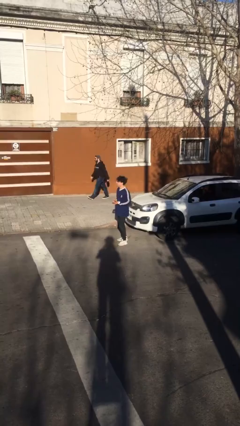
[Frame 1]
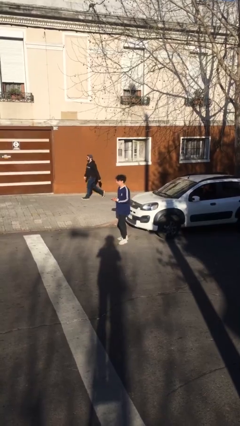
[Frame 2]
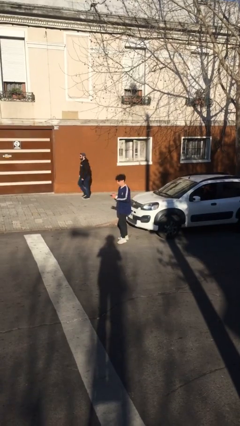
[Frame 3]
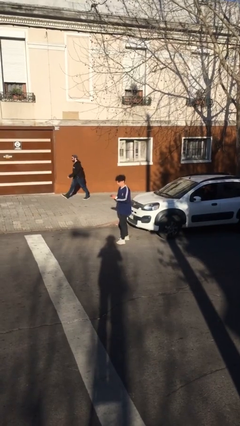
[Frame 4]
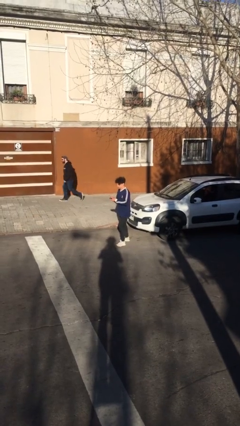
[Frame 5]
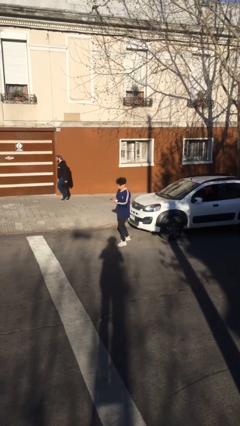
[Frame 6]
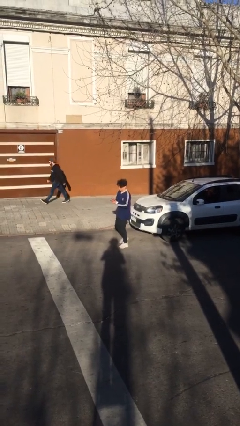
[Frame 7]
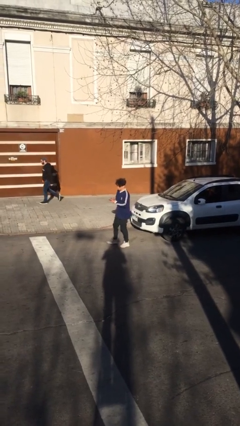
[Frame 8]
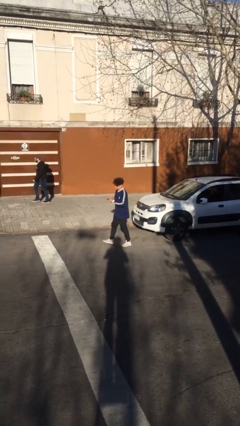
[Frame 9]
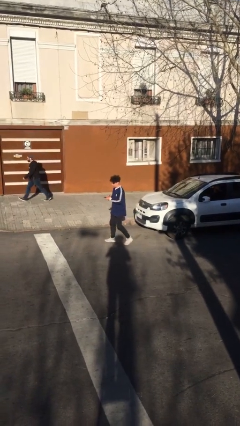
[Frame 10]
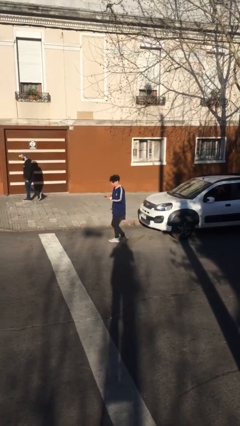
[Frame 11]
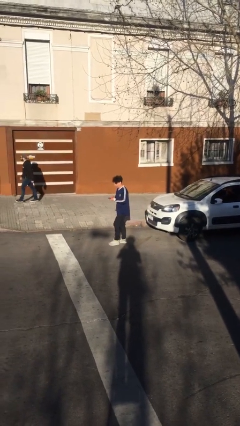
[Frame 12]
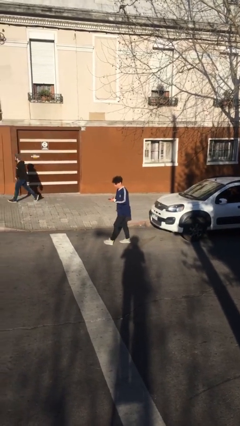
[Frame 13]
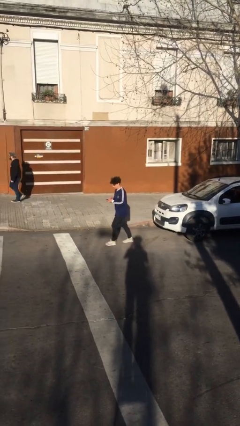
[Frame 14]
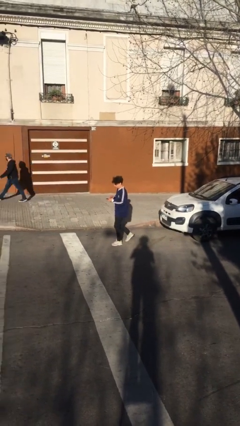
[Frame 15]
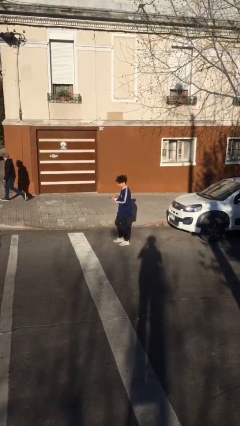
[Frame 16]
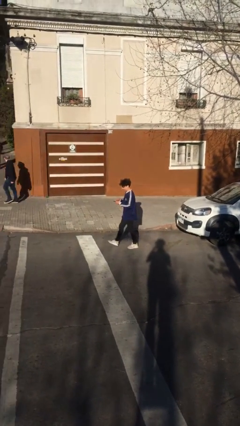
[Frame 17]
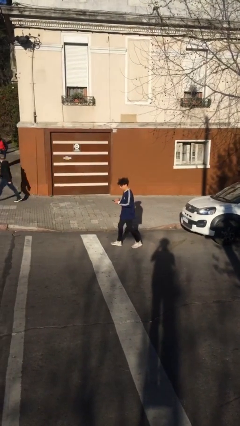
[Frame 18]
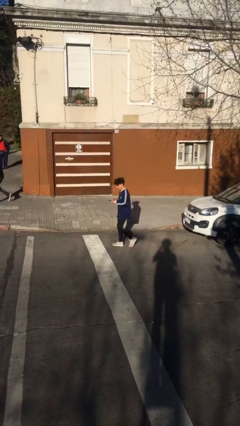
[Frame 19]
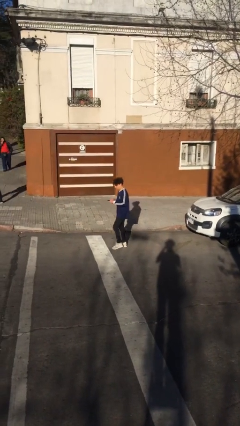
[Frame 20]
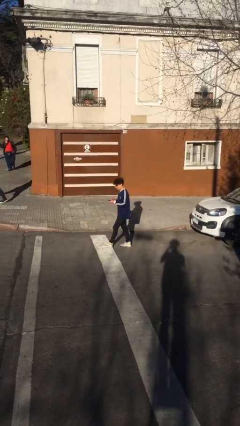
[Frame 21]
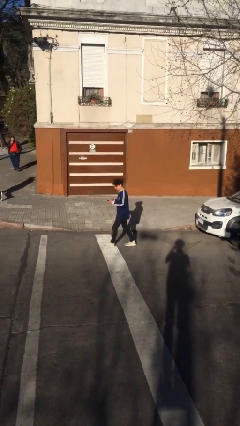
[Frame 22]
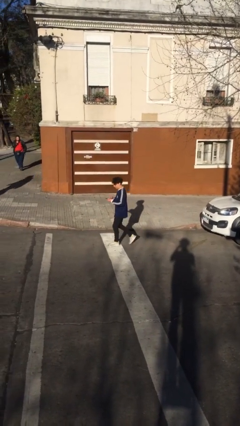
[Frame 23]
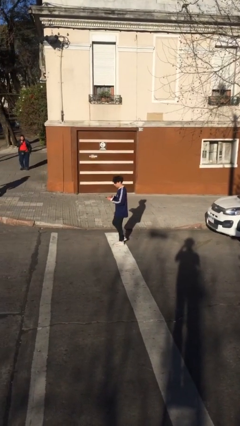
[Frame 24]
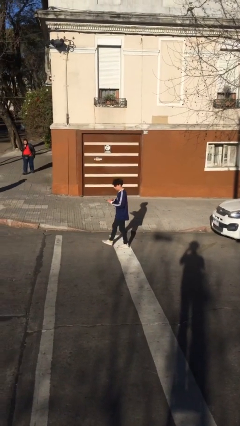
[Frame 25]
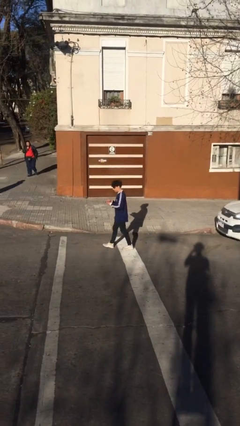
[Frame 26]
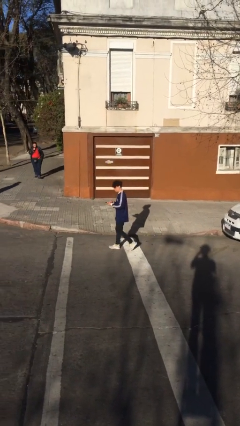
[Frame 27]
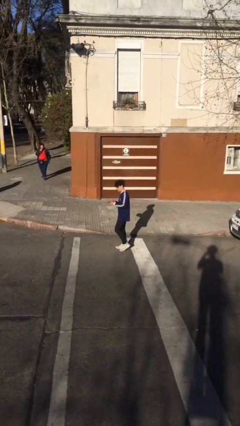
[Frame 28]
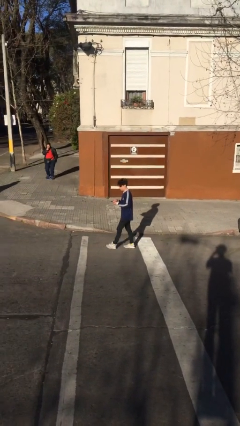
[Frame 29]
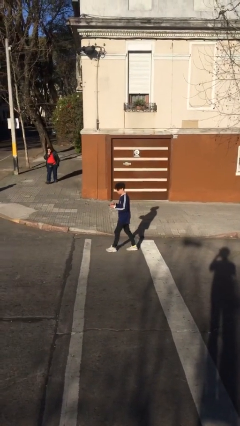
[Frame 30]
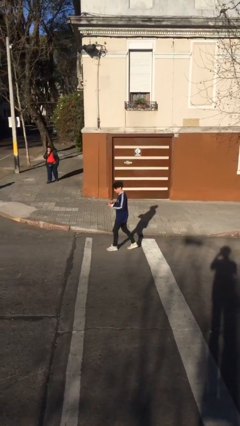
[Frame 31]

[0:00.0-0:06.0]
person texts on phone

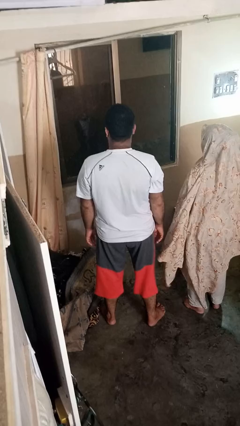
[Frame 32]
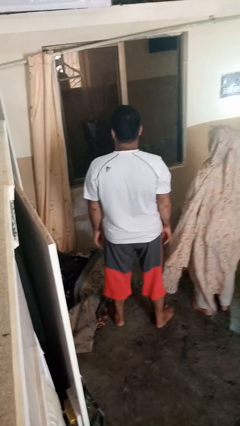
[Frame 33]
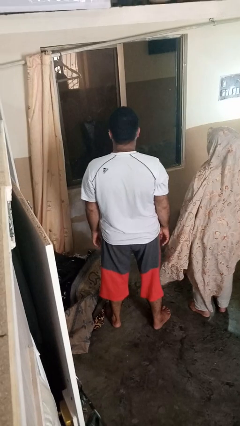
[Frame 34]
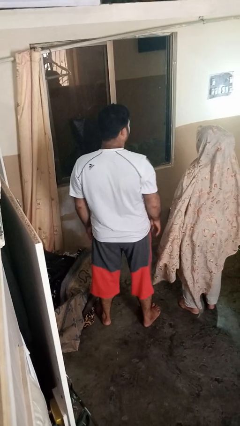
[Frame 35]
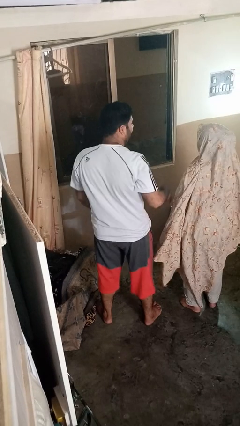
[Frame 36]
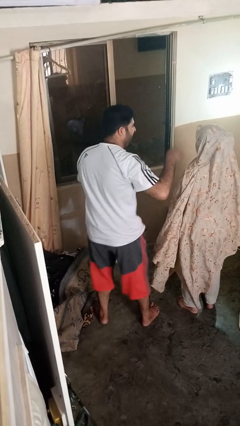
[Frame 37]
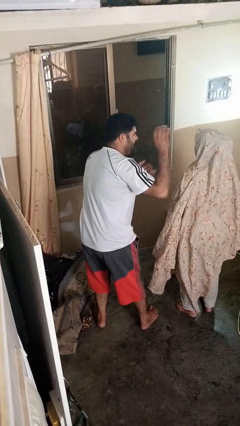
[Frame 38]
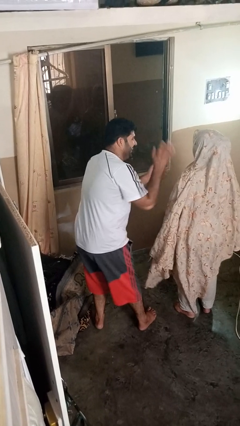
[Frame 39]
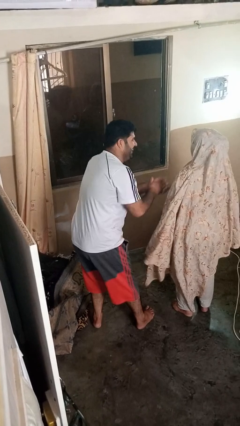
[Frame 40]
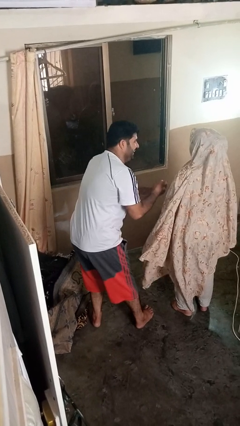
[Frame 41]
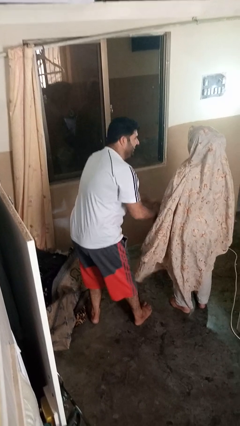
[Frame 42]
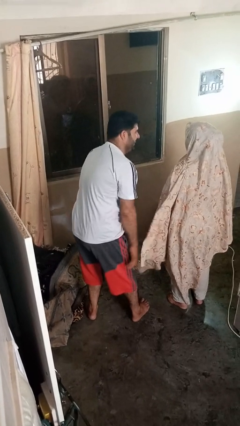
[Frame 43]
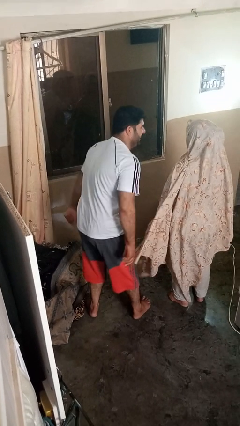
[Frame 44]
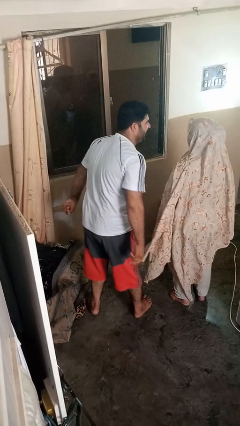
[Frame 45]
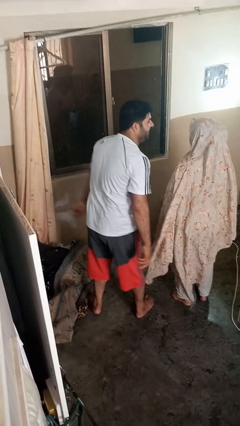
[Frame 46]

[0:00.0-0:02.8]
person laughs with person

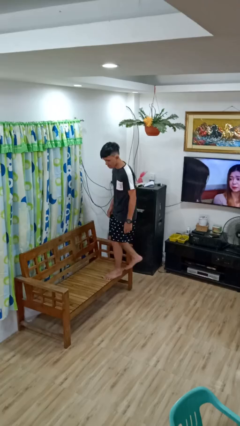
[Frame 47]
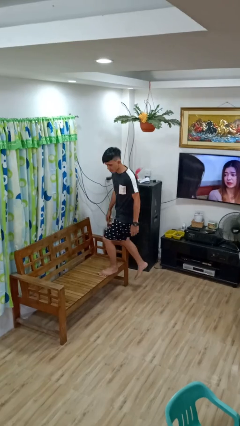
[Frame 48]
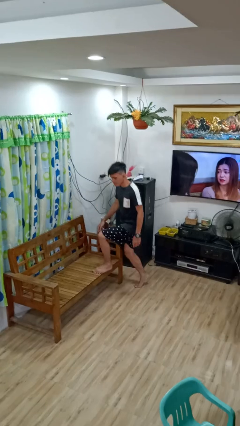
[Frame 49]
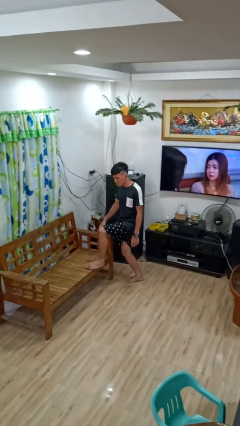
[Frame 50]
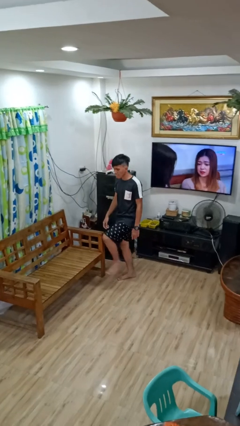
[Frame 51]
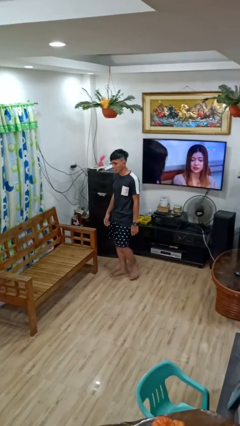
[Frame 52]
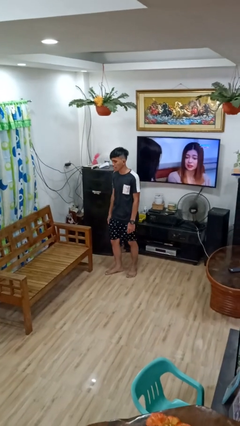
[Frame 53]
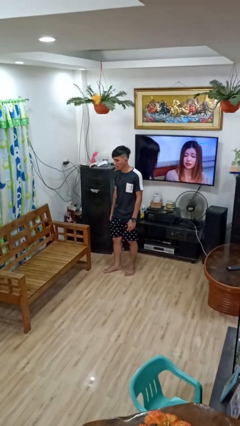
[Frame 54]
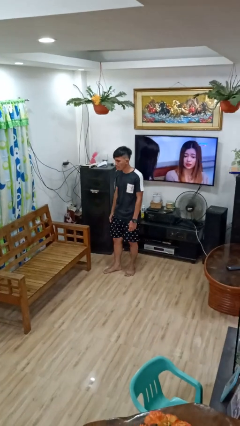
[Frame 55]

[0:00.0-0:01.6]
person climbs off couch

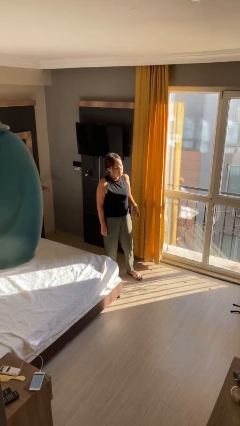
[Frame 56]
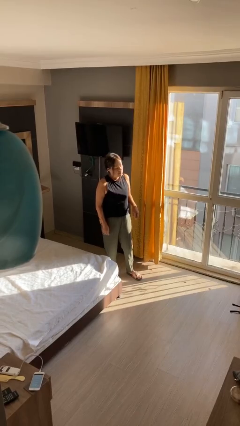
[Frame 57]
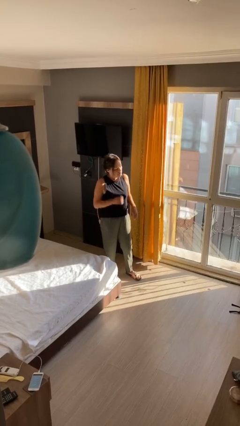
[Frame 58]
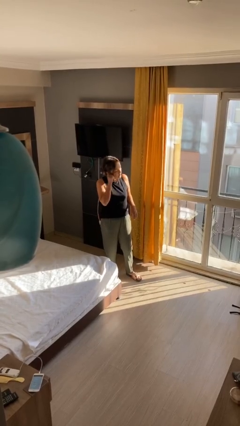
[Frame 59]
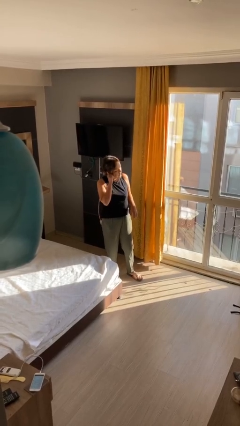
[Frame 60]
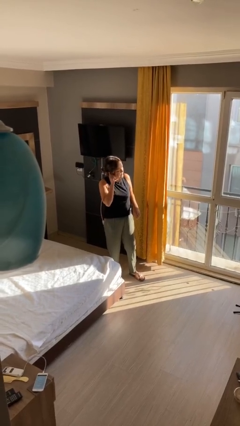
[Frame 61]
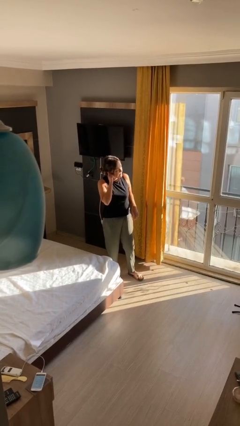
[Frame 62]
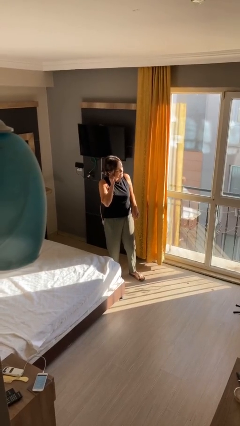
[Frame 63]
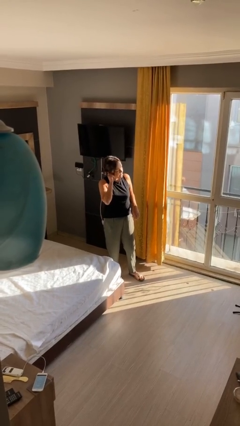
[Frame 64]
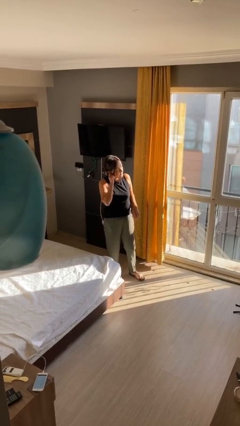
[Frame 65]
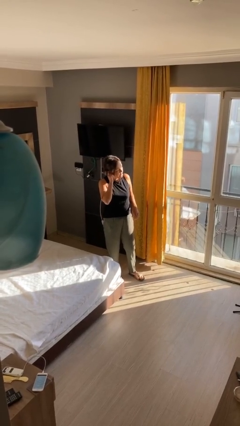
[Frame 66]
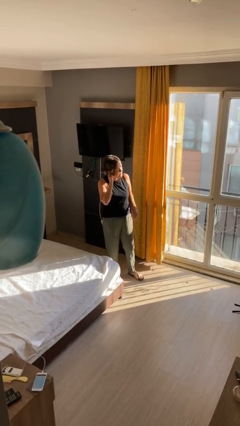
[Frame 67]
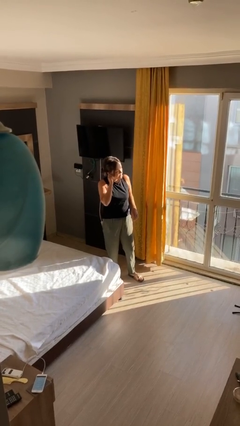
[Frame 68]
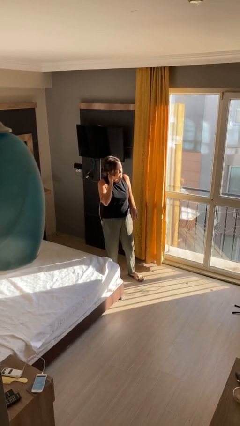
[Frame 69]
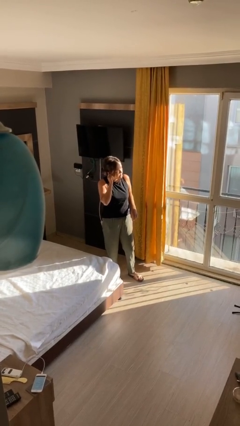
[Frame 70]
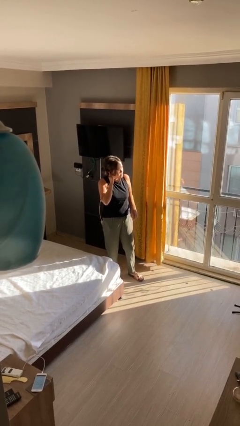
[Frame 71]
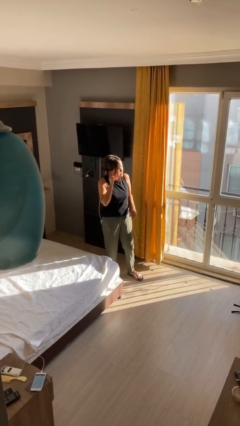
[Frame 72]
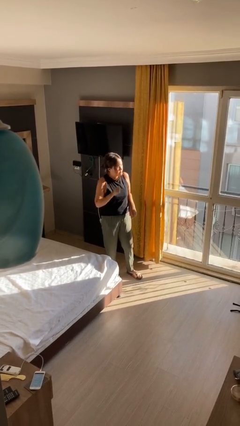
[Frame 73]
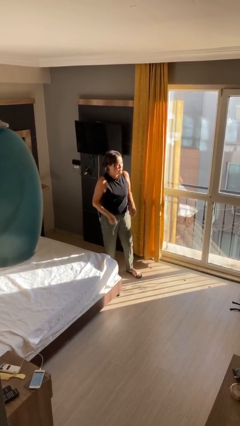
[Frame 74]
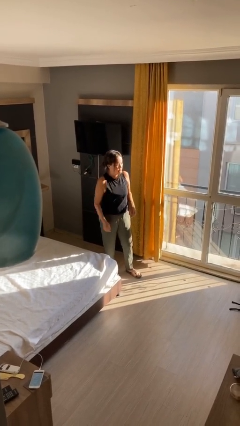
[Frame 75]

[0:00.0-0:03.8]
person touches earlobe

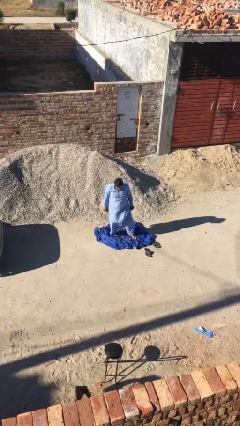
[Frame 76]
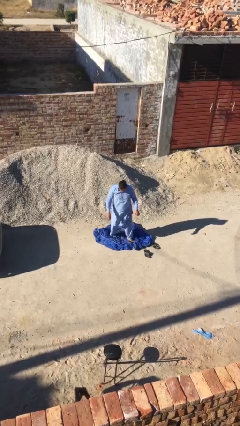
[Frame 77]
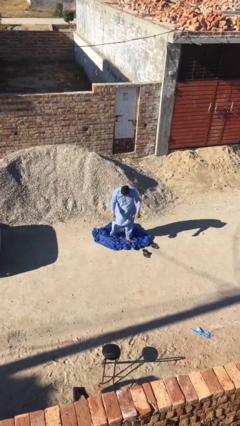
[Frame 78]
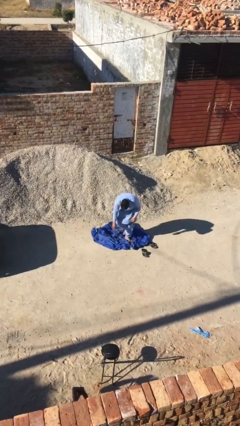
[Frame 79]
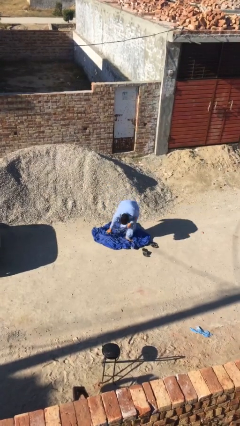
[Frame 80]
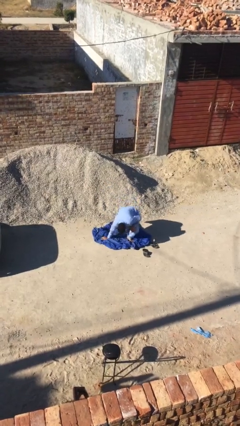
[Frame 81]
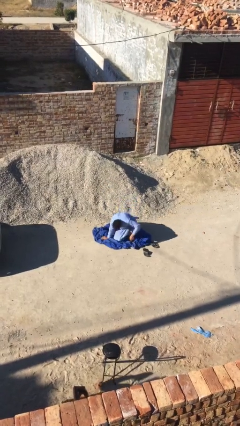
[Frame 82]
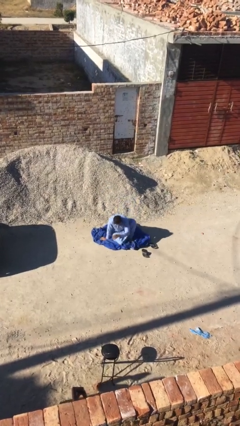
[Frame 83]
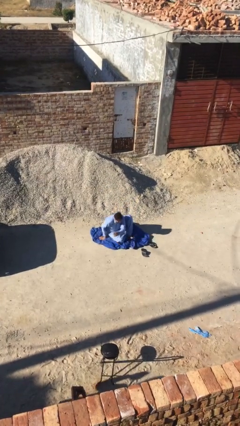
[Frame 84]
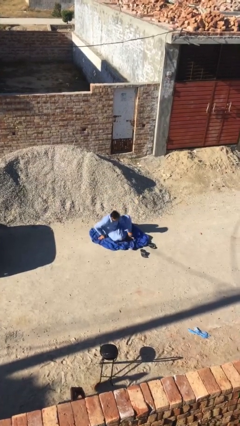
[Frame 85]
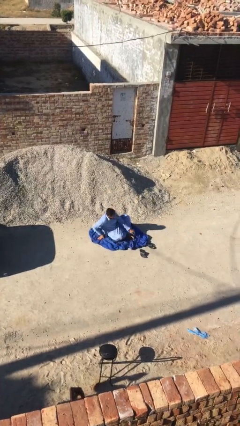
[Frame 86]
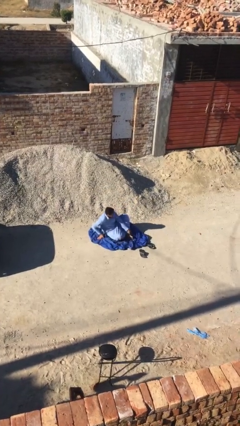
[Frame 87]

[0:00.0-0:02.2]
person sits down

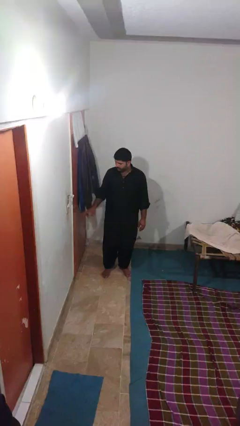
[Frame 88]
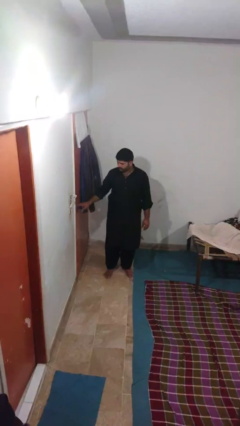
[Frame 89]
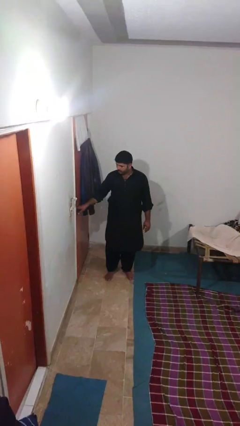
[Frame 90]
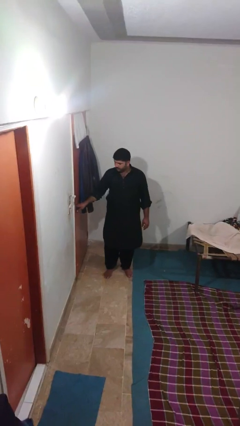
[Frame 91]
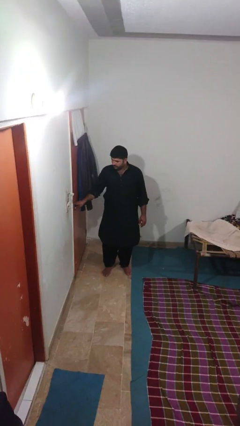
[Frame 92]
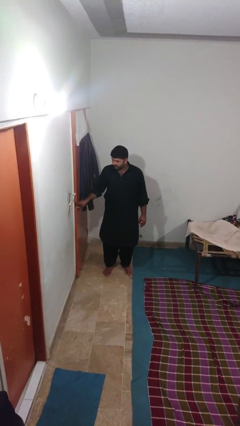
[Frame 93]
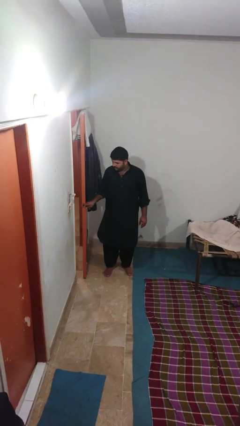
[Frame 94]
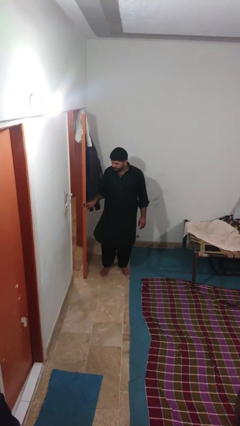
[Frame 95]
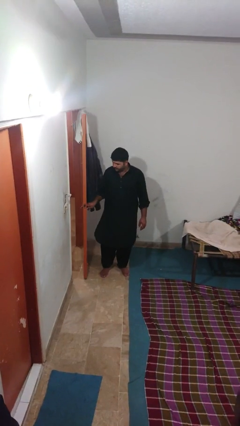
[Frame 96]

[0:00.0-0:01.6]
person opens facility door
